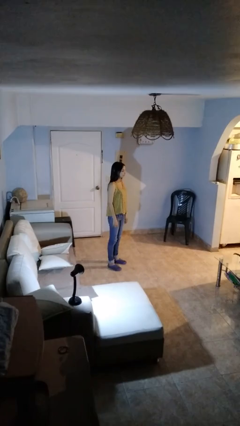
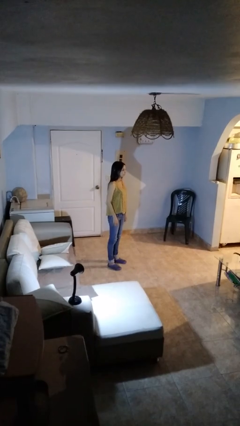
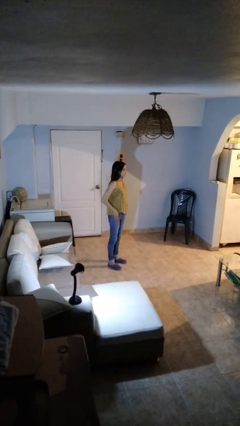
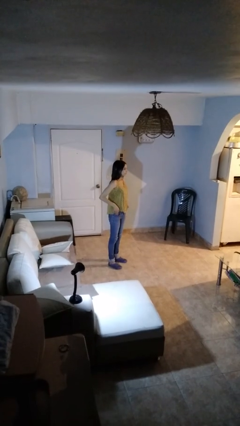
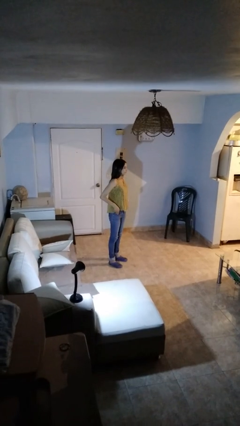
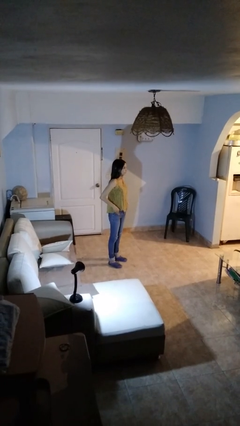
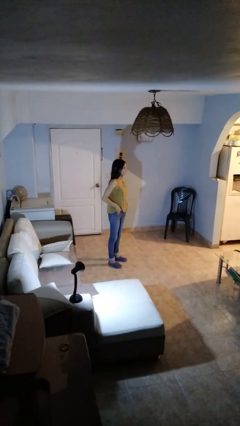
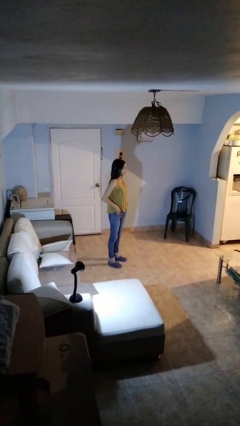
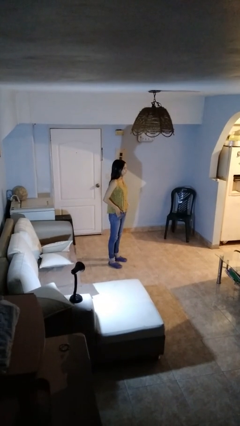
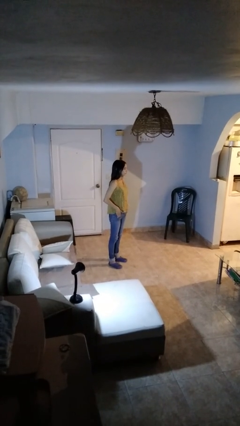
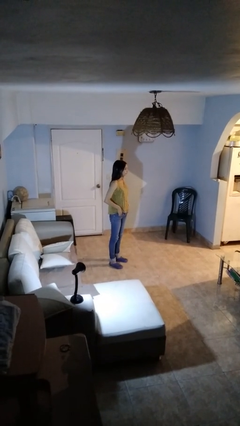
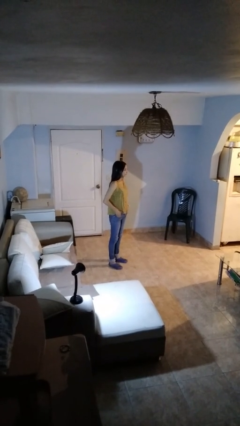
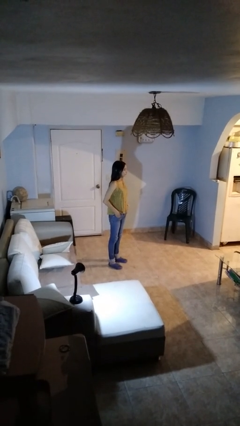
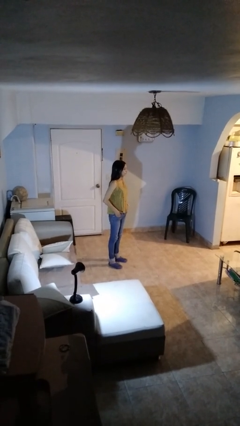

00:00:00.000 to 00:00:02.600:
person puts hands in back pockets

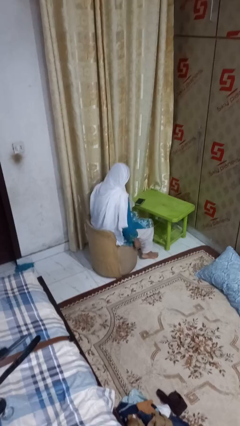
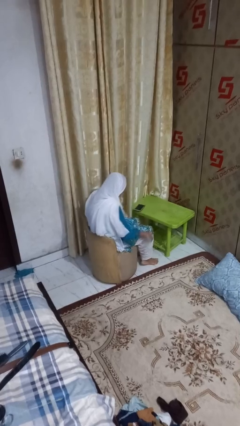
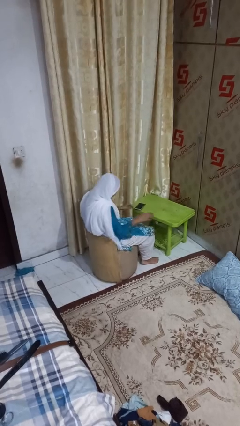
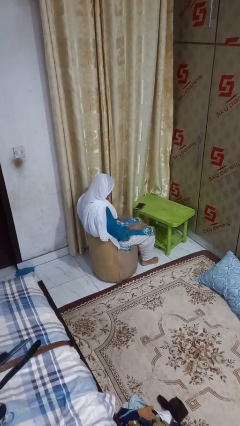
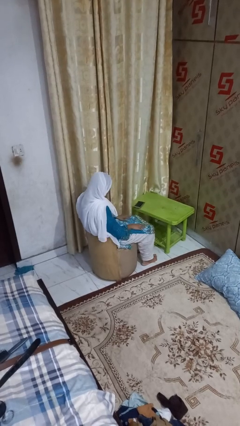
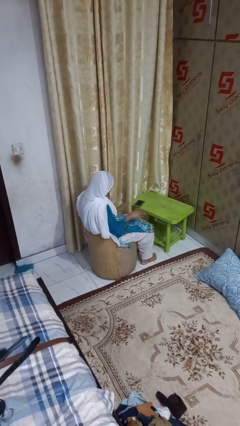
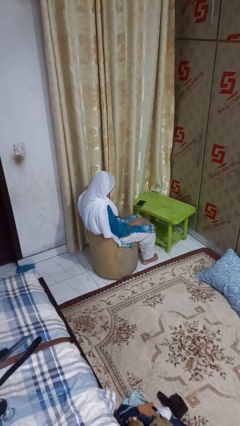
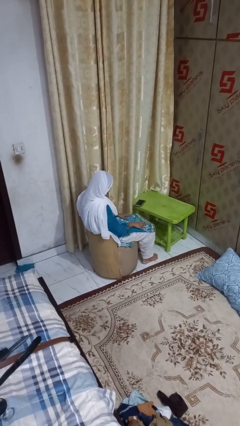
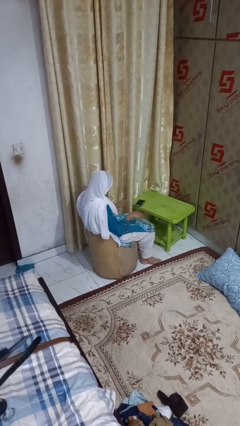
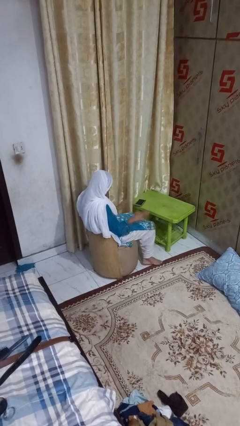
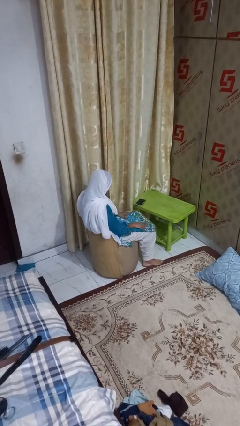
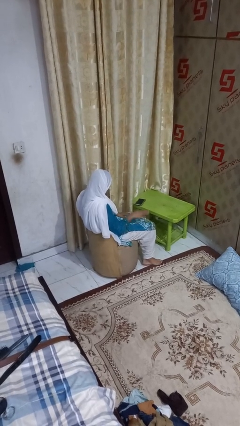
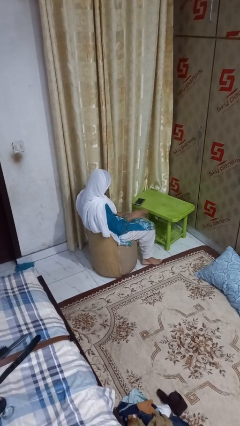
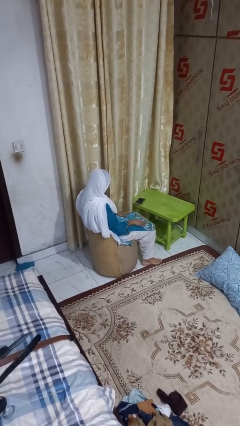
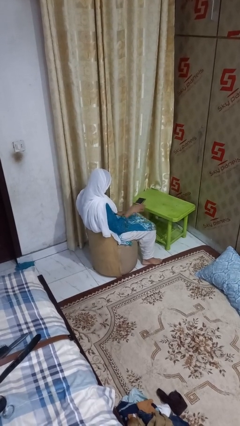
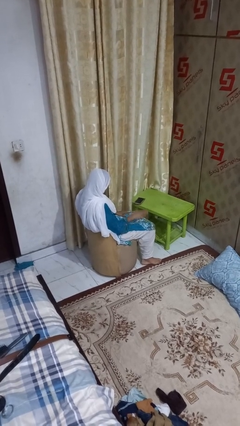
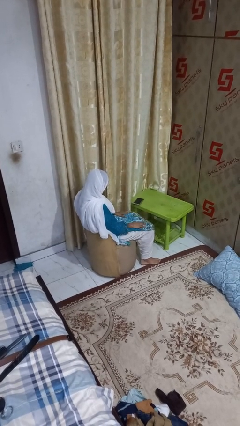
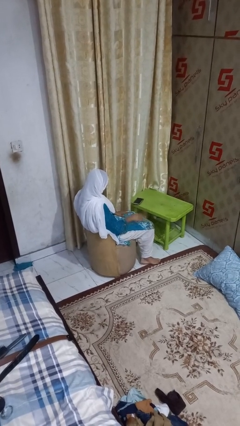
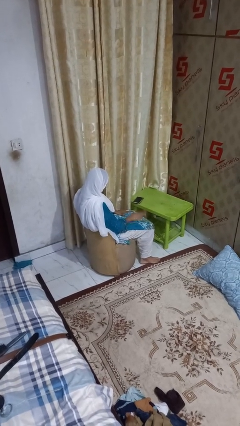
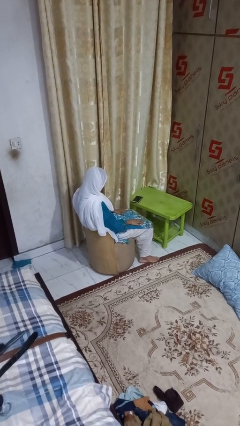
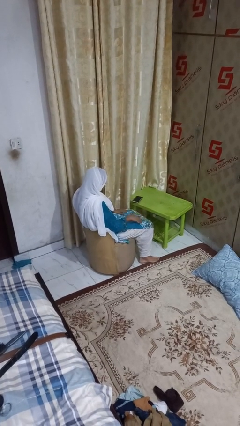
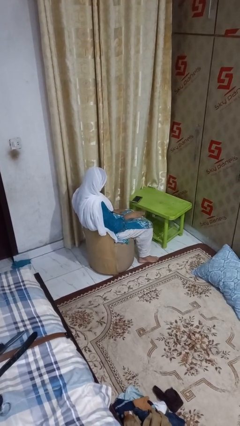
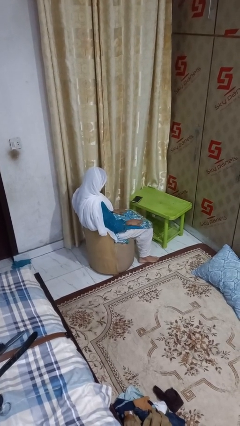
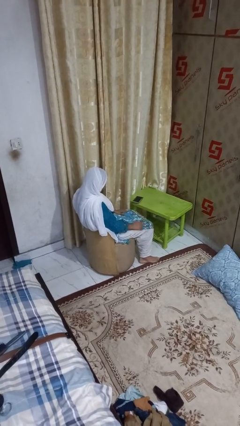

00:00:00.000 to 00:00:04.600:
person slaps hands on thighs

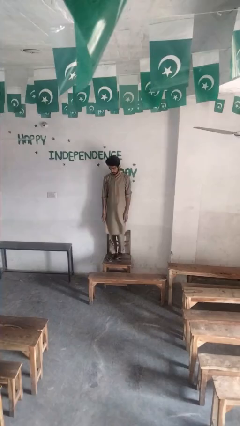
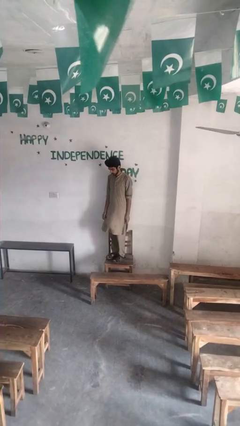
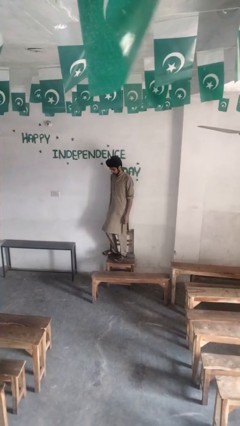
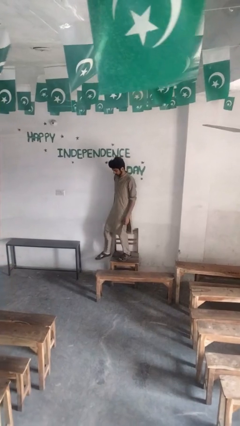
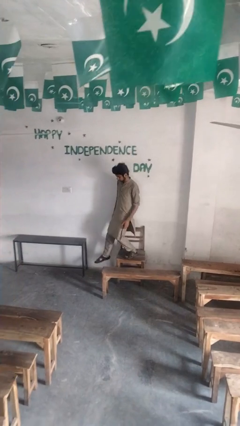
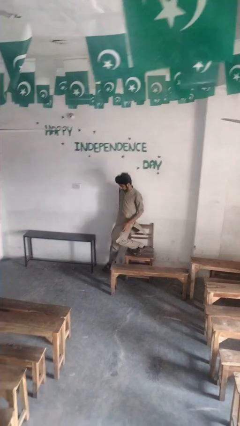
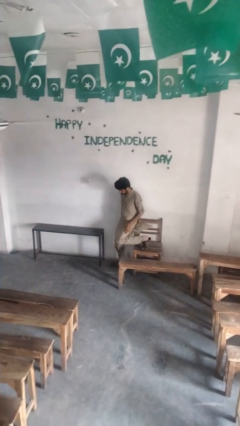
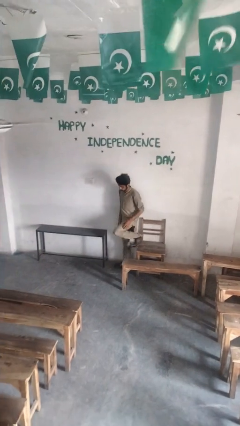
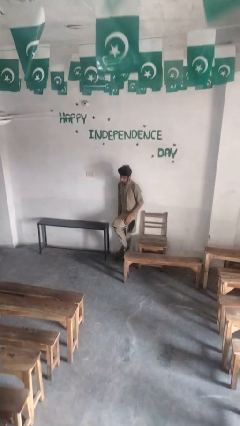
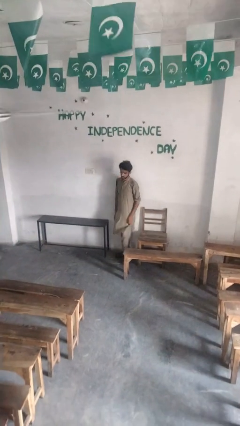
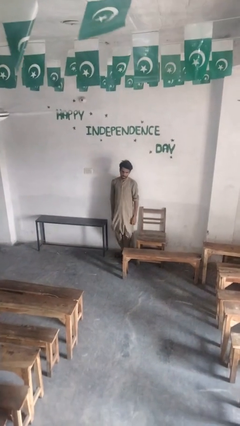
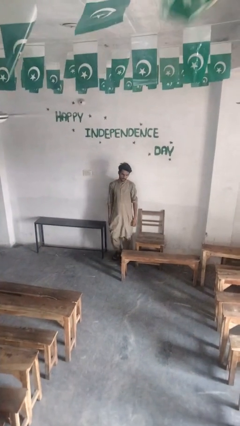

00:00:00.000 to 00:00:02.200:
person climbs off chair

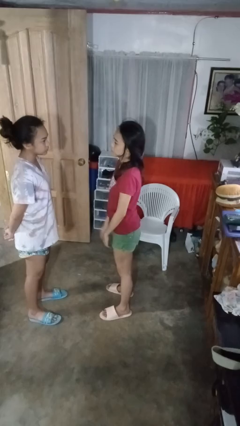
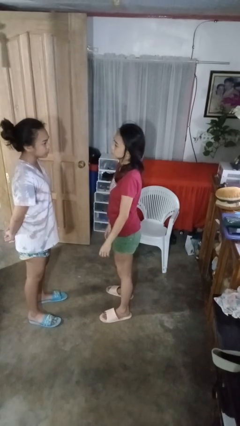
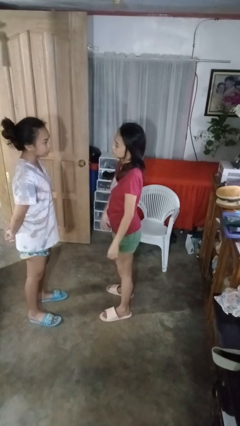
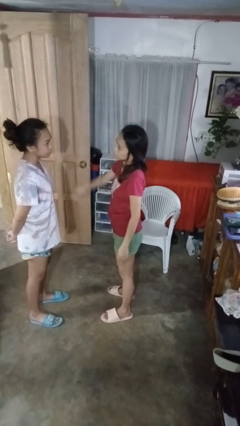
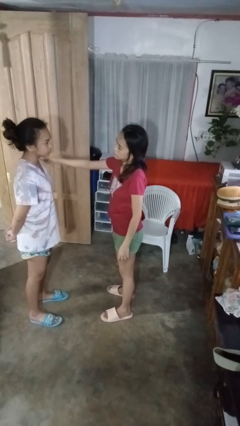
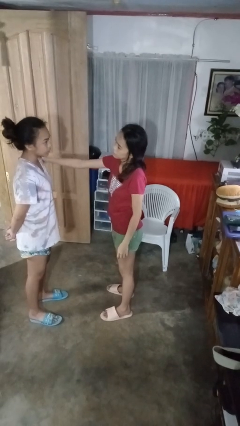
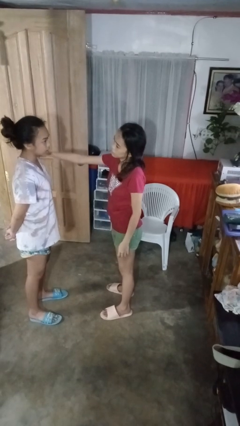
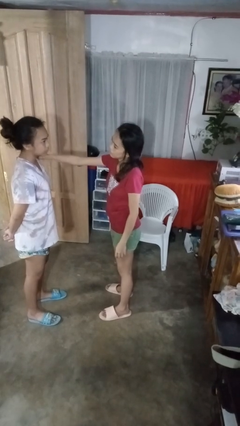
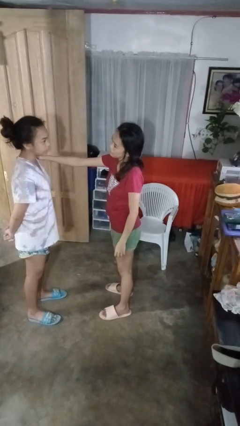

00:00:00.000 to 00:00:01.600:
person pounds shoulders of person

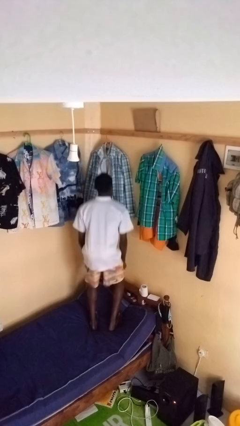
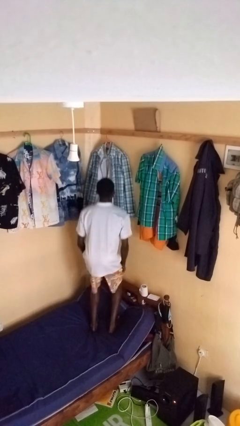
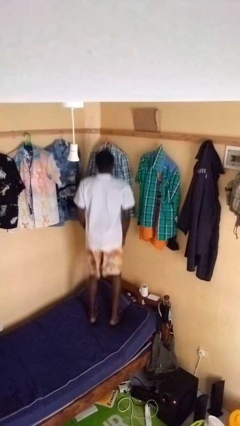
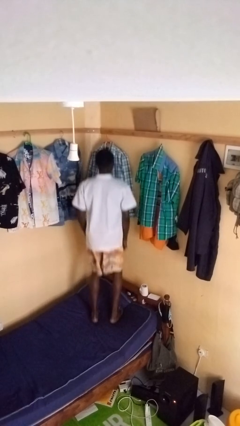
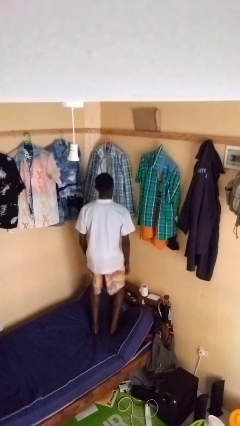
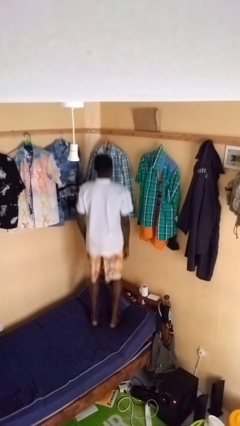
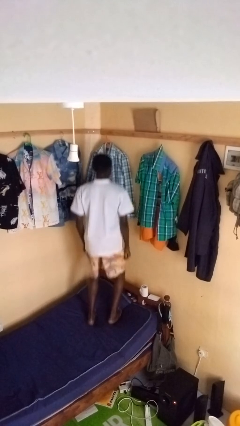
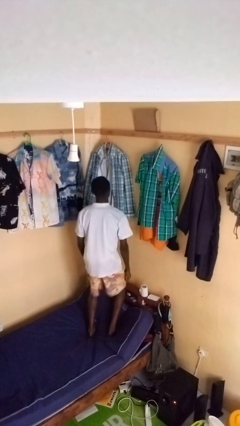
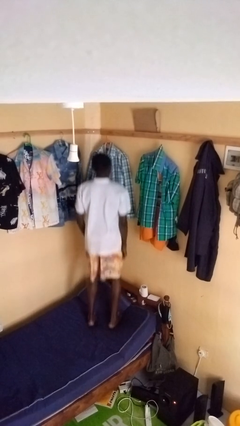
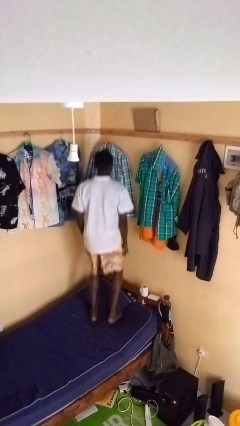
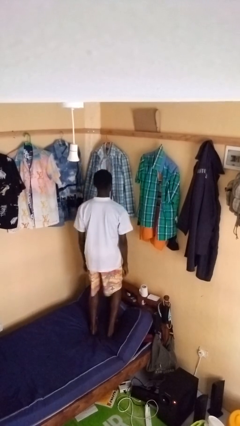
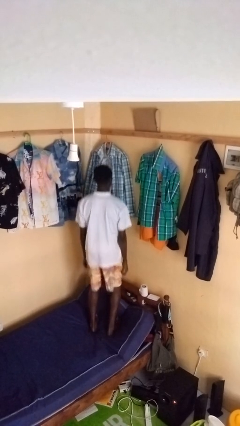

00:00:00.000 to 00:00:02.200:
person jumps on bed

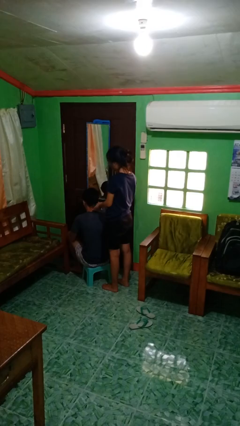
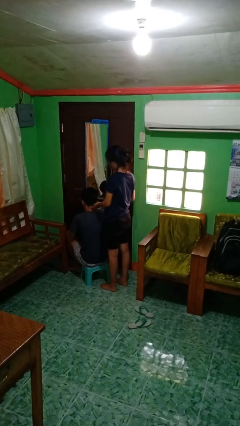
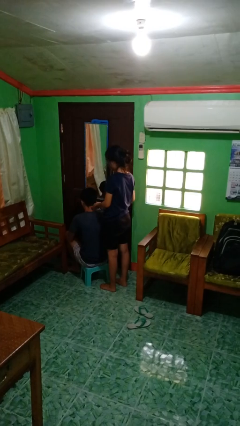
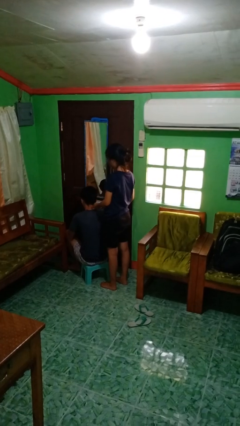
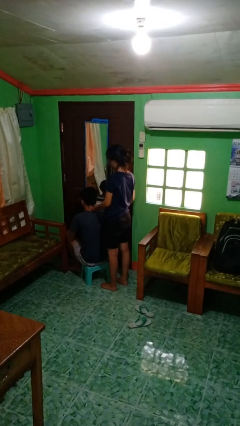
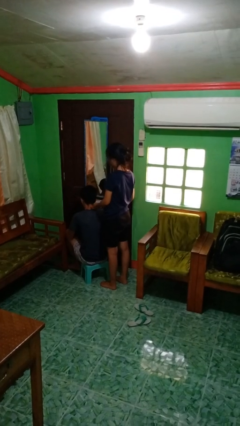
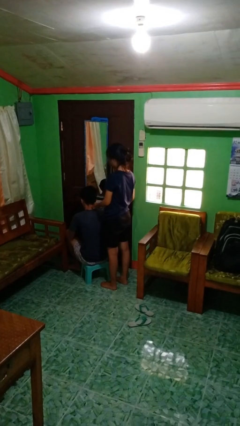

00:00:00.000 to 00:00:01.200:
person brushes hair of person

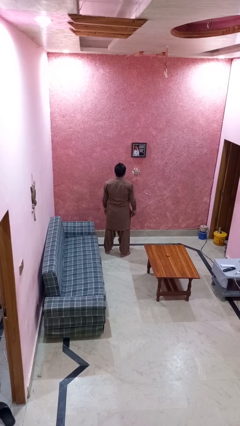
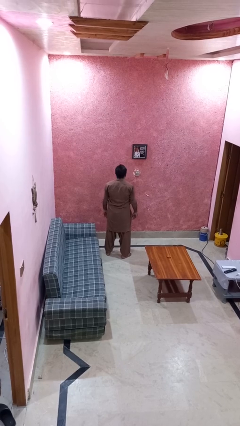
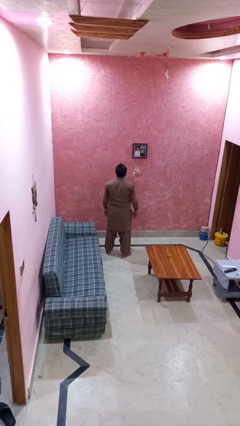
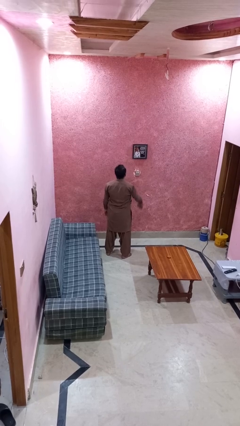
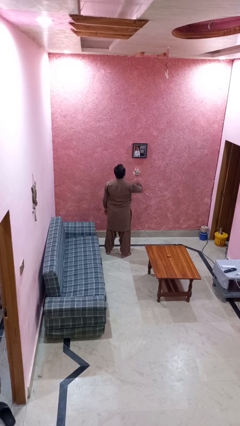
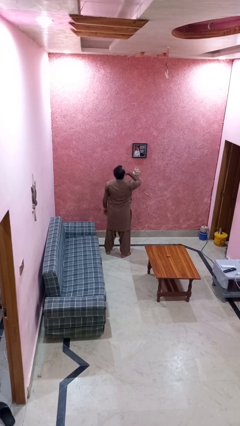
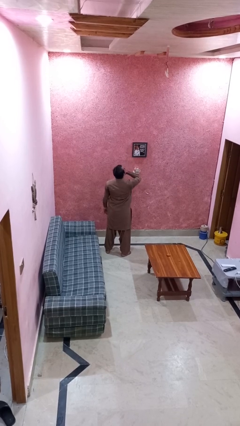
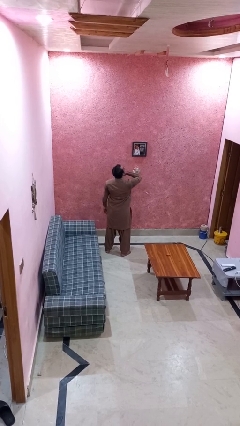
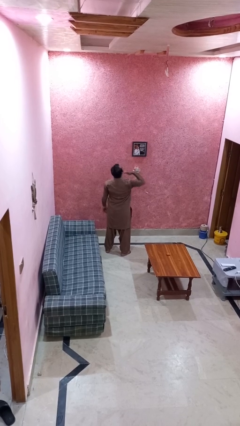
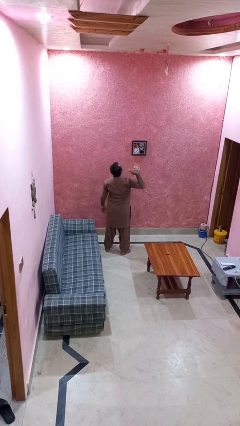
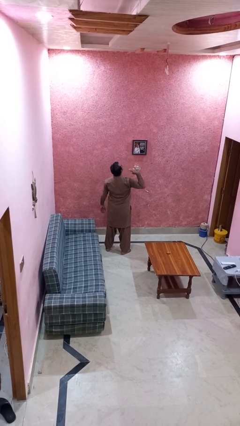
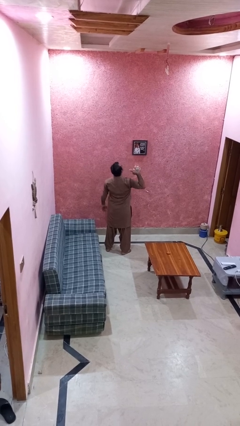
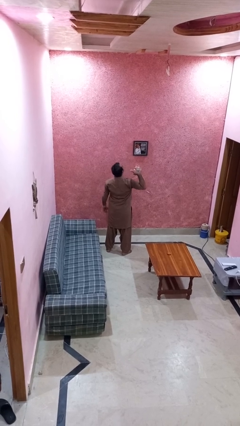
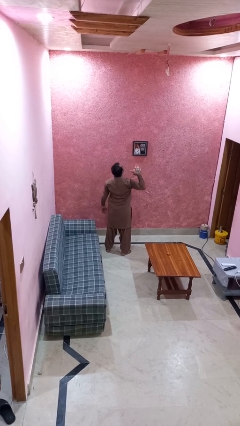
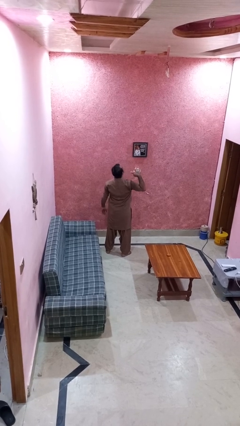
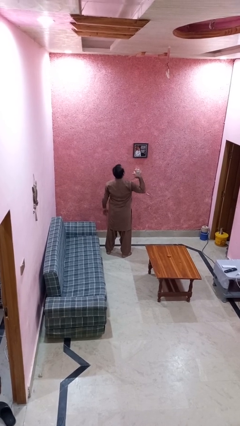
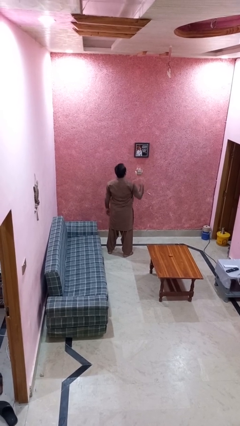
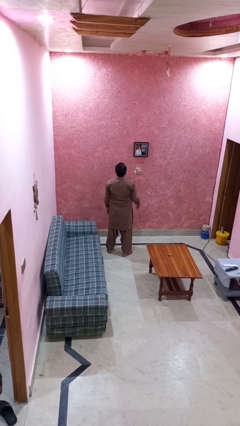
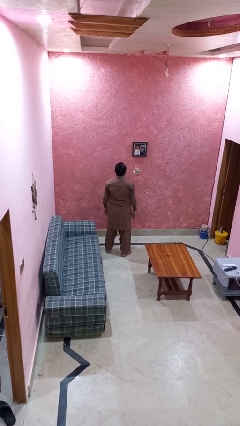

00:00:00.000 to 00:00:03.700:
person gestures cut
